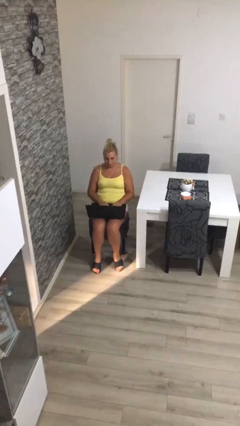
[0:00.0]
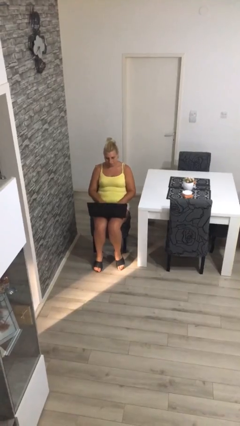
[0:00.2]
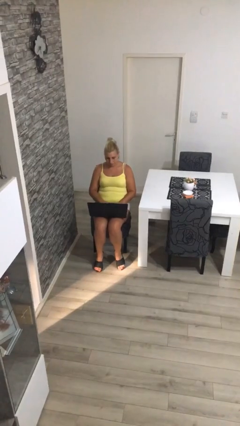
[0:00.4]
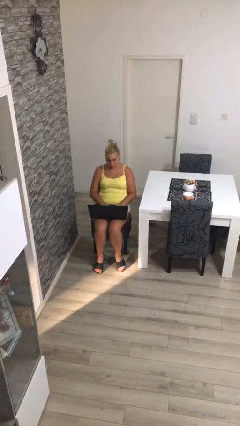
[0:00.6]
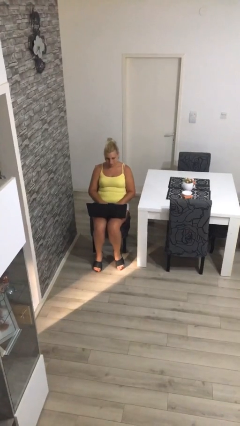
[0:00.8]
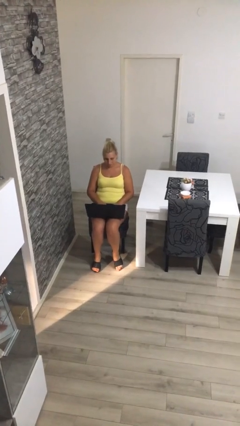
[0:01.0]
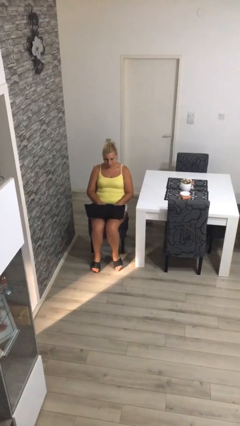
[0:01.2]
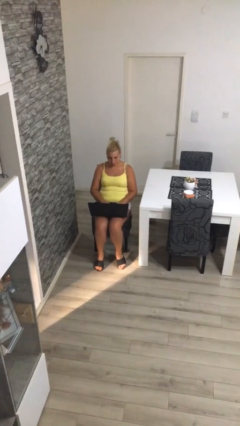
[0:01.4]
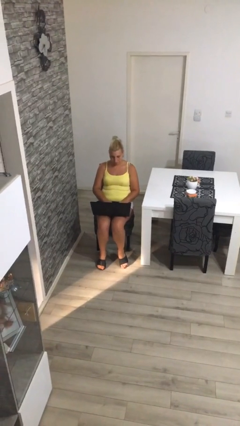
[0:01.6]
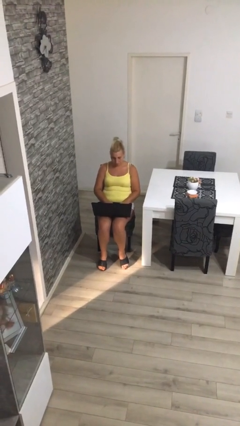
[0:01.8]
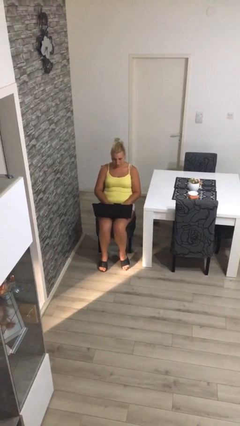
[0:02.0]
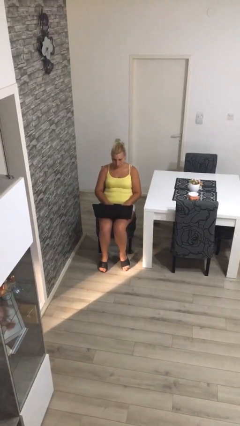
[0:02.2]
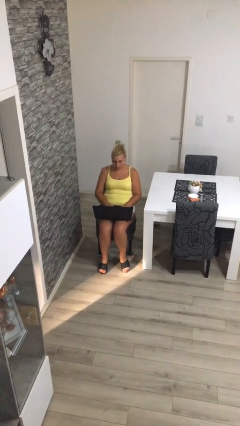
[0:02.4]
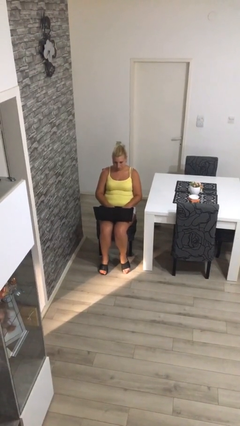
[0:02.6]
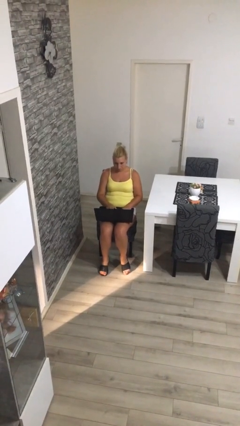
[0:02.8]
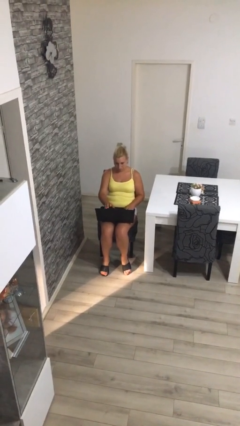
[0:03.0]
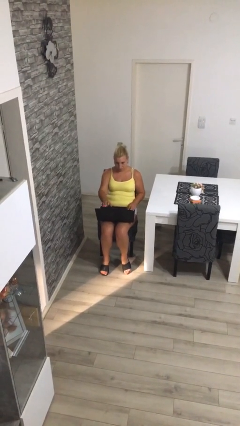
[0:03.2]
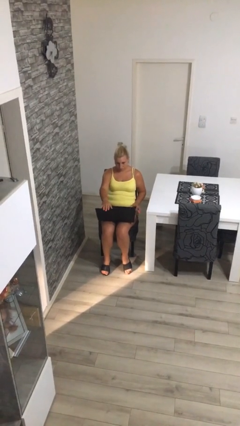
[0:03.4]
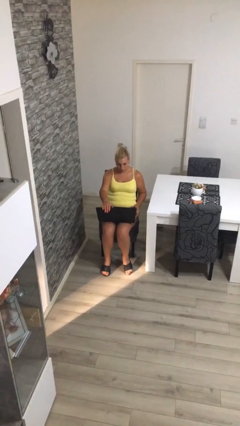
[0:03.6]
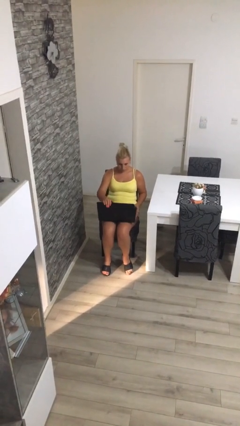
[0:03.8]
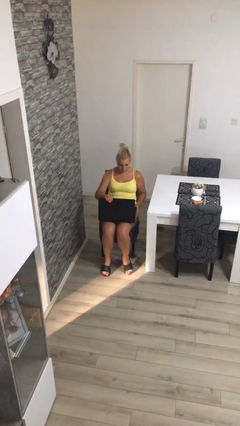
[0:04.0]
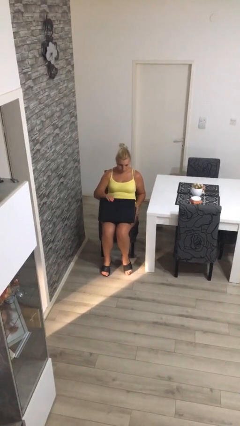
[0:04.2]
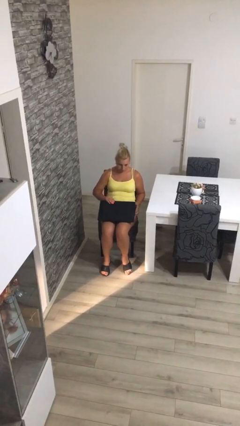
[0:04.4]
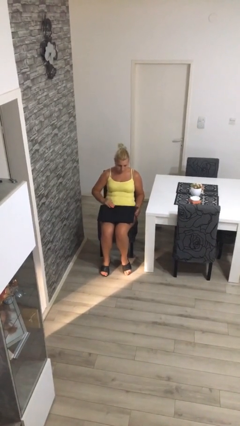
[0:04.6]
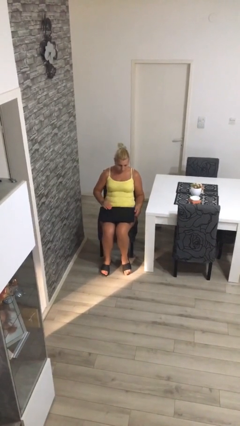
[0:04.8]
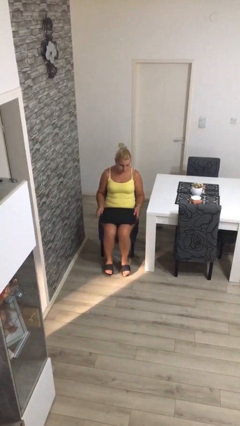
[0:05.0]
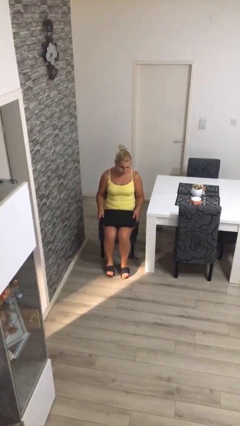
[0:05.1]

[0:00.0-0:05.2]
person interacts with laptop

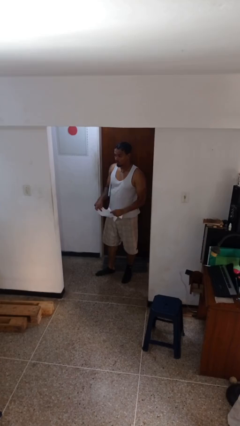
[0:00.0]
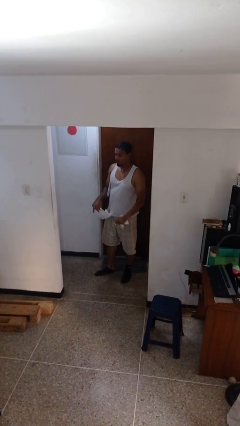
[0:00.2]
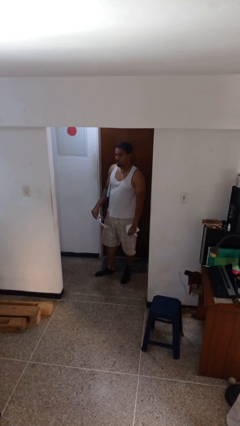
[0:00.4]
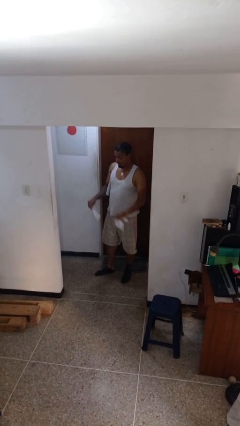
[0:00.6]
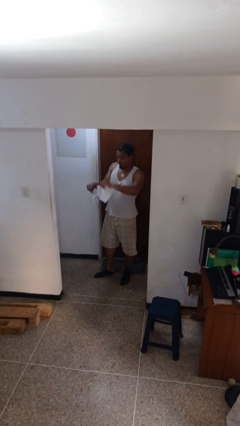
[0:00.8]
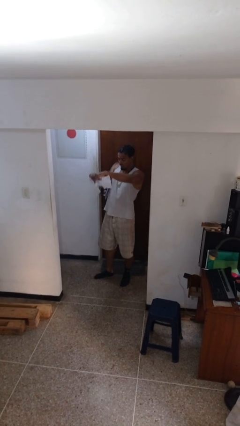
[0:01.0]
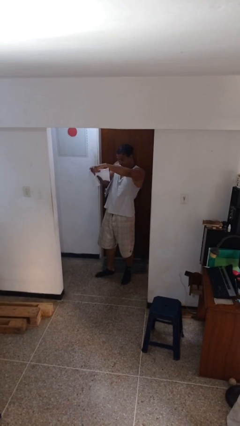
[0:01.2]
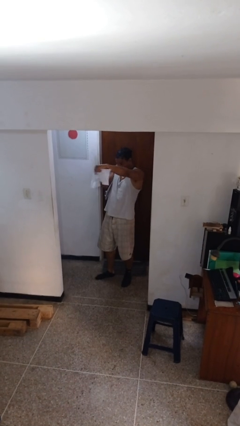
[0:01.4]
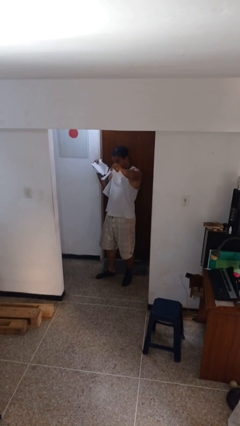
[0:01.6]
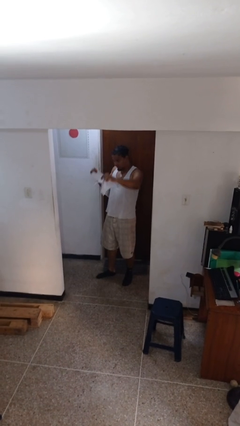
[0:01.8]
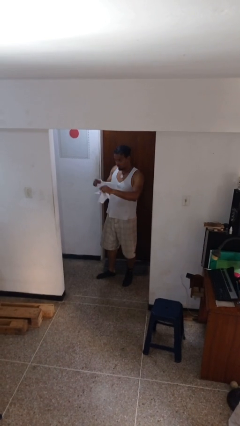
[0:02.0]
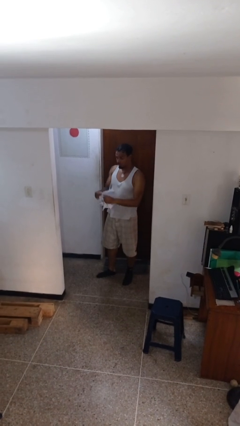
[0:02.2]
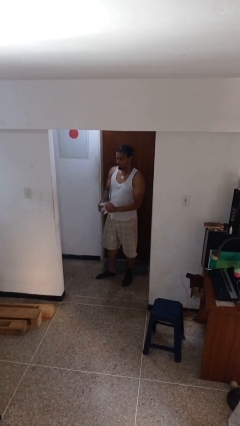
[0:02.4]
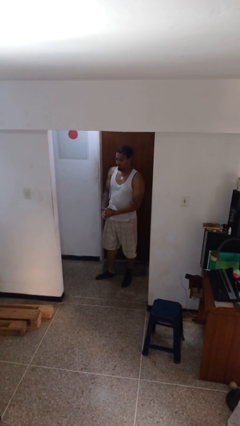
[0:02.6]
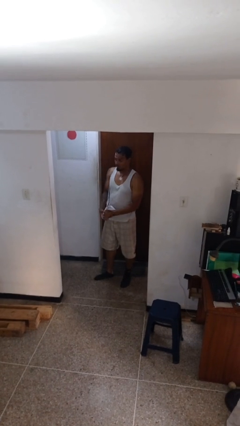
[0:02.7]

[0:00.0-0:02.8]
person tears paper

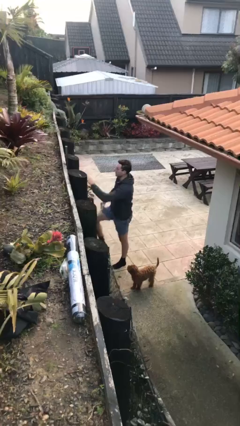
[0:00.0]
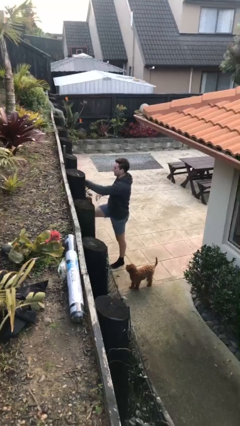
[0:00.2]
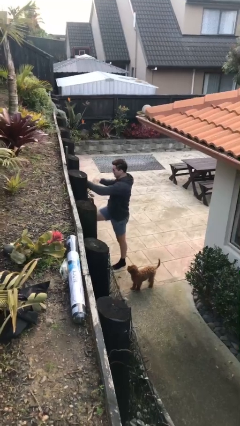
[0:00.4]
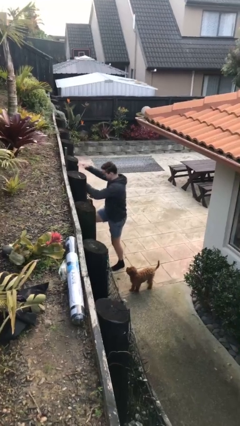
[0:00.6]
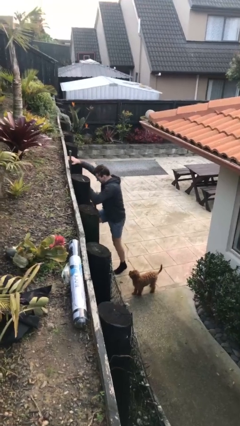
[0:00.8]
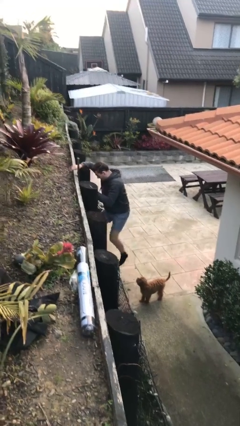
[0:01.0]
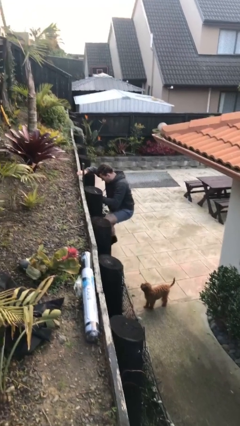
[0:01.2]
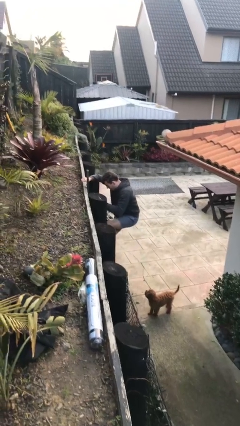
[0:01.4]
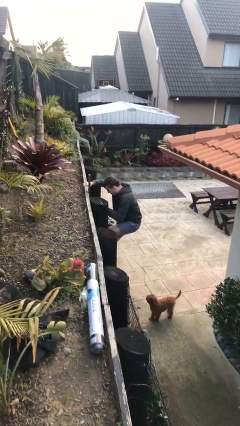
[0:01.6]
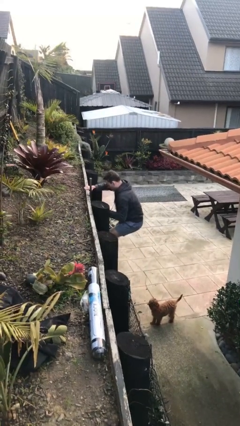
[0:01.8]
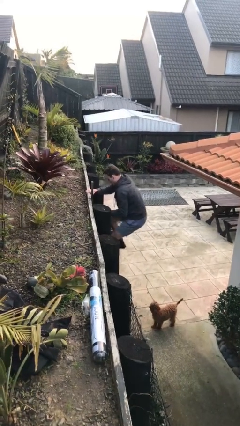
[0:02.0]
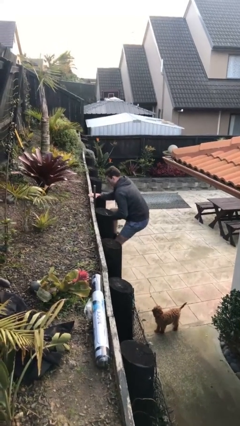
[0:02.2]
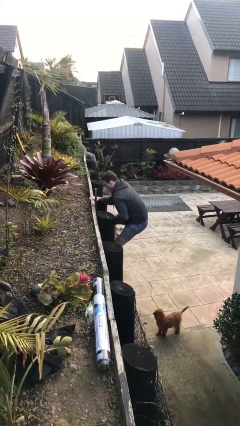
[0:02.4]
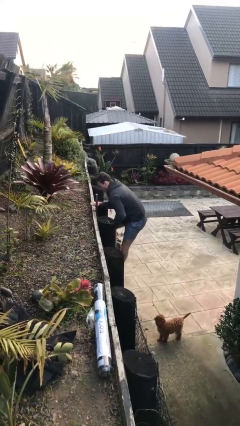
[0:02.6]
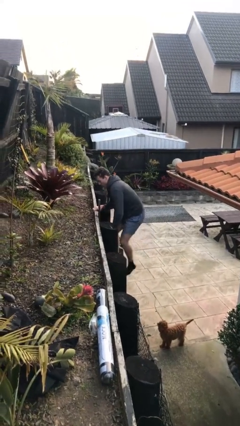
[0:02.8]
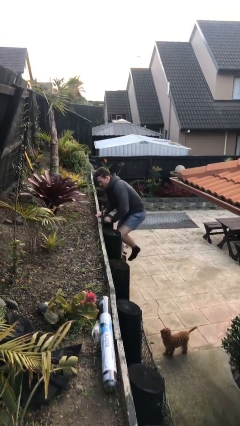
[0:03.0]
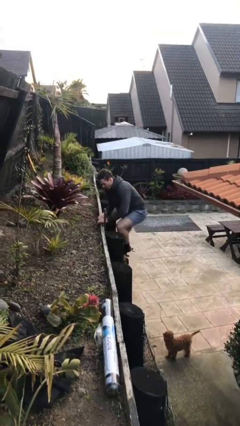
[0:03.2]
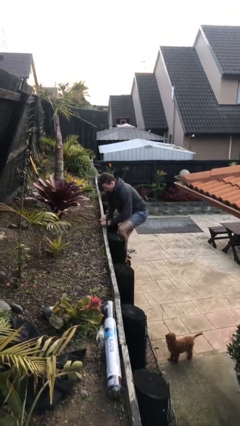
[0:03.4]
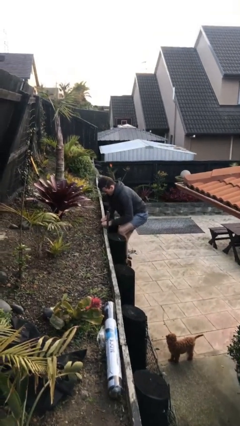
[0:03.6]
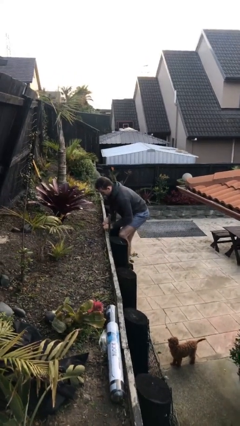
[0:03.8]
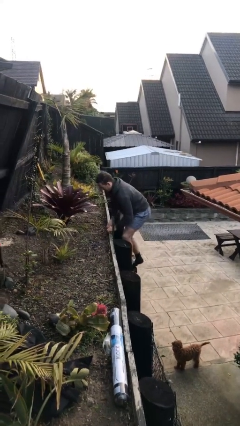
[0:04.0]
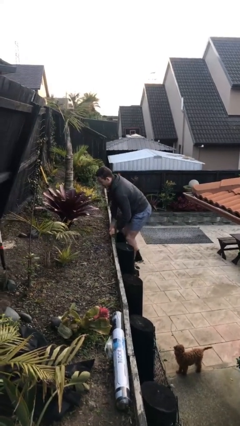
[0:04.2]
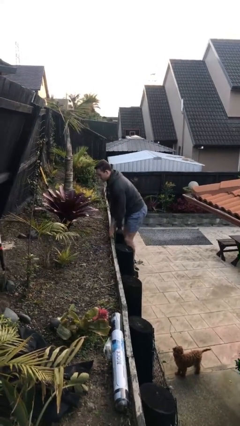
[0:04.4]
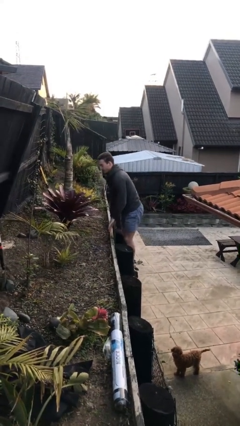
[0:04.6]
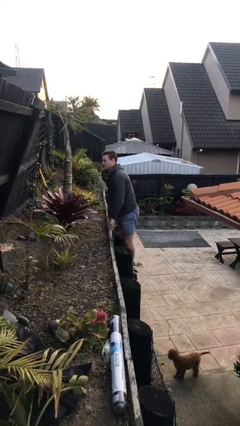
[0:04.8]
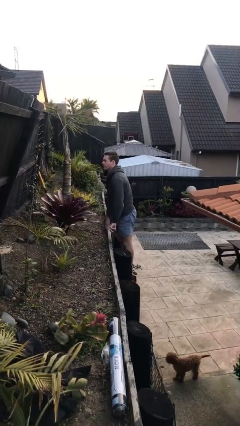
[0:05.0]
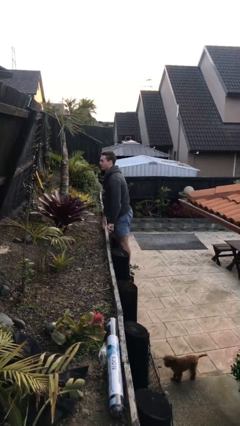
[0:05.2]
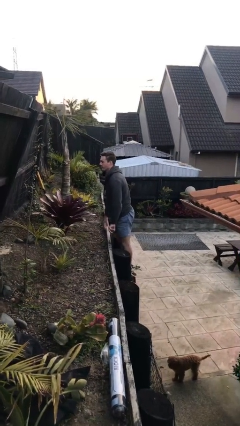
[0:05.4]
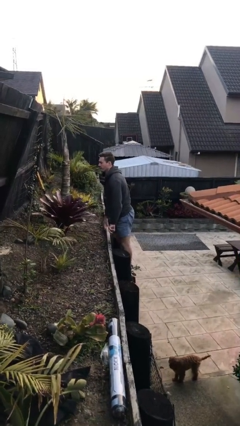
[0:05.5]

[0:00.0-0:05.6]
person climbs up ladder

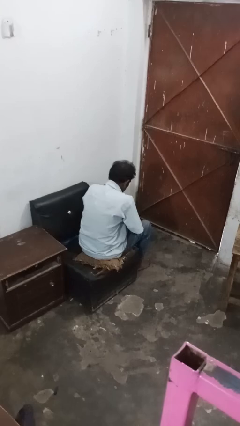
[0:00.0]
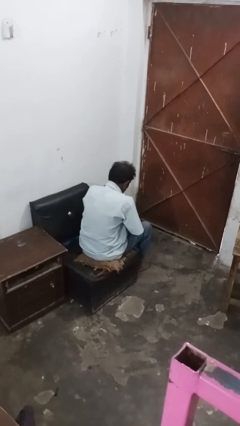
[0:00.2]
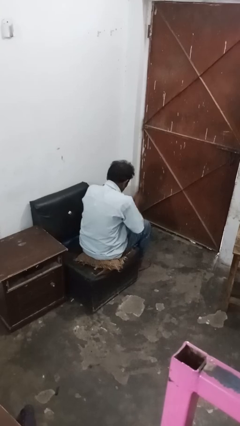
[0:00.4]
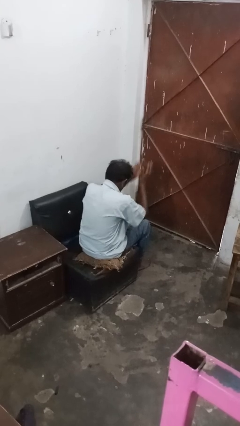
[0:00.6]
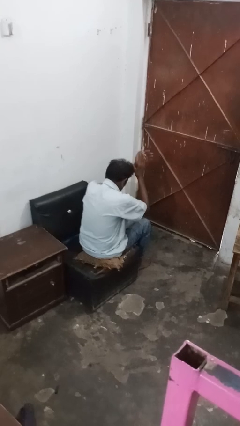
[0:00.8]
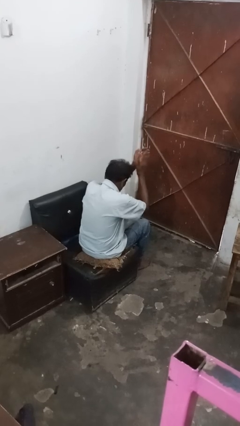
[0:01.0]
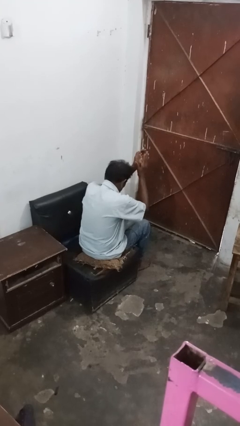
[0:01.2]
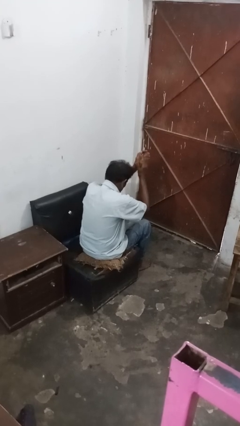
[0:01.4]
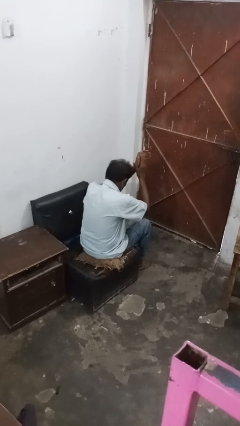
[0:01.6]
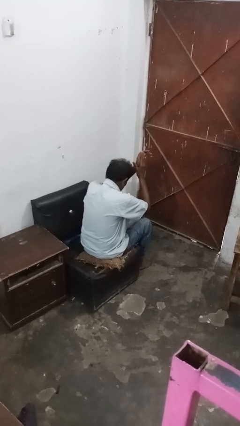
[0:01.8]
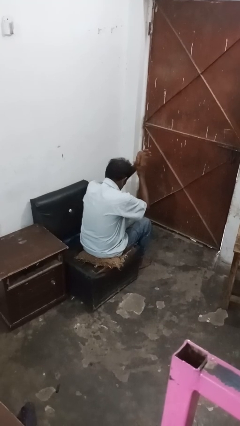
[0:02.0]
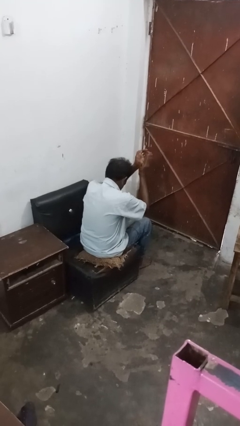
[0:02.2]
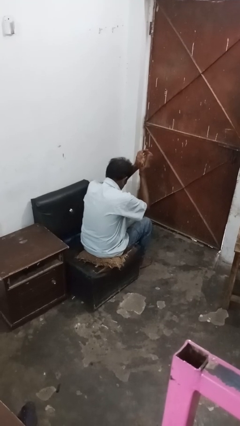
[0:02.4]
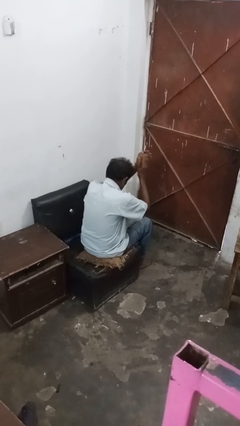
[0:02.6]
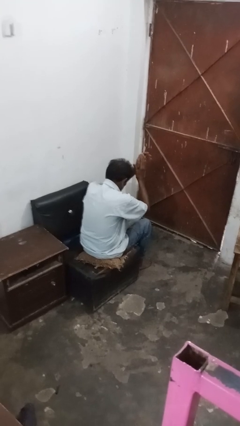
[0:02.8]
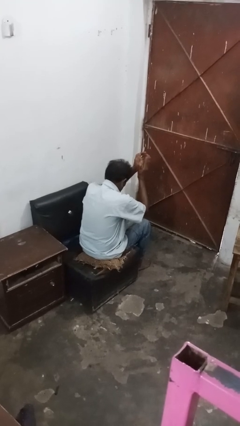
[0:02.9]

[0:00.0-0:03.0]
person claps hands

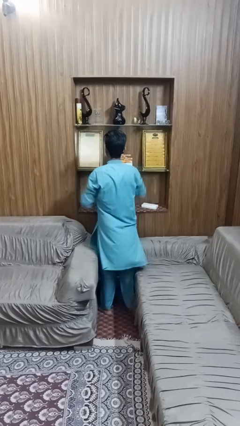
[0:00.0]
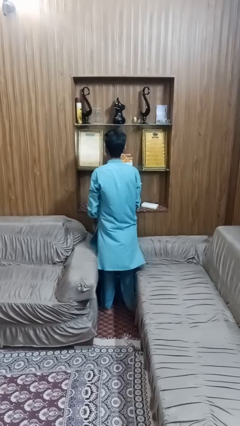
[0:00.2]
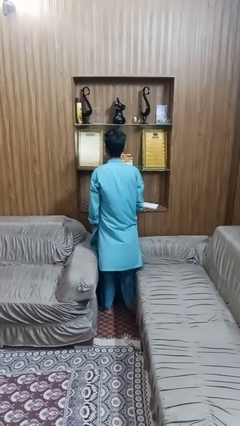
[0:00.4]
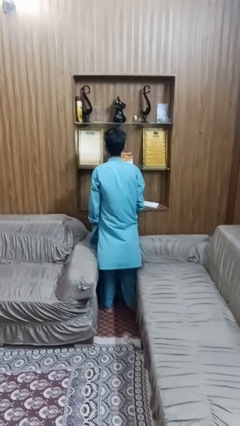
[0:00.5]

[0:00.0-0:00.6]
person puts down object on shelf

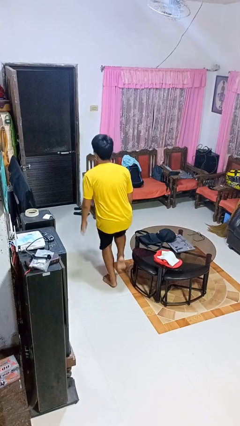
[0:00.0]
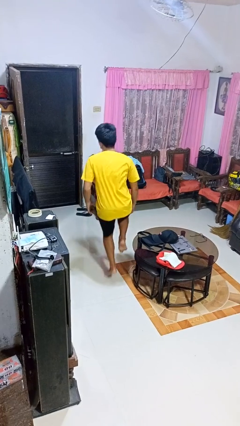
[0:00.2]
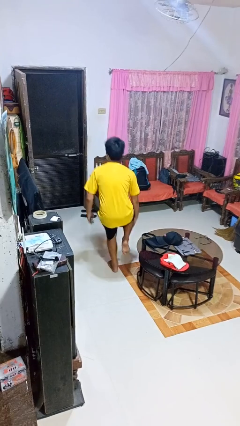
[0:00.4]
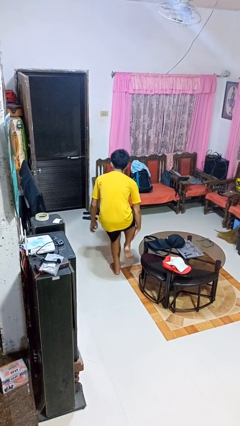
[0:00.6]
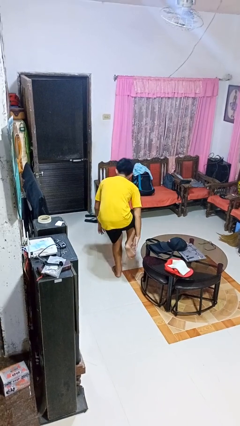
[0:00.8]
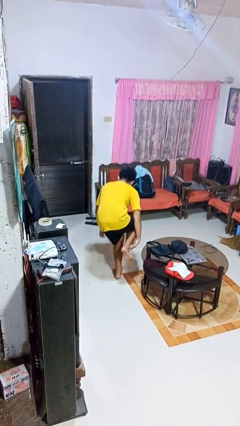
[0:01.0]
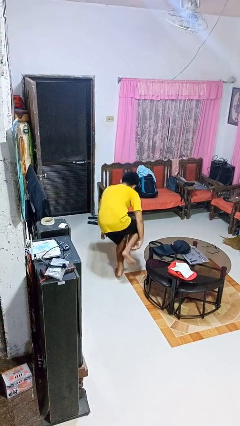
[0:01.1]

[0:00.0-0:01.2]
person trips on object on floor
